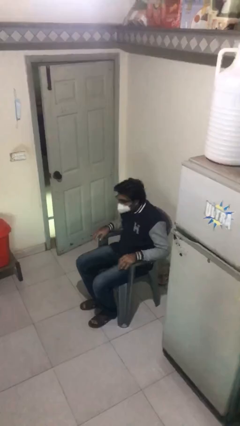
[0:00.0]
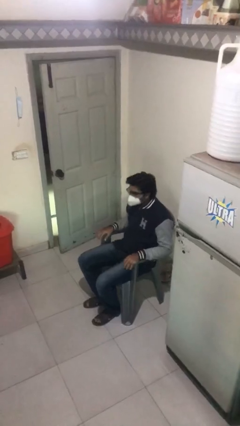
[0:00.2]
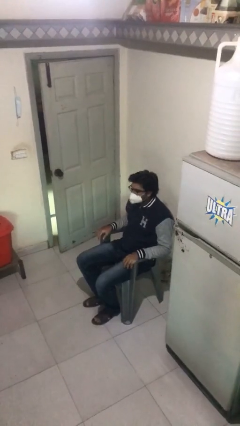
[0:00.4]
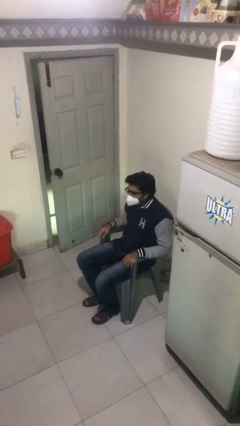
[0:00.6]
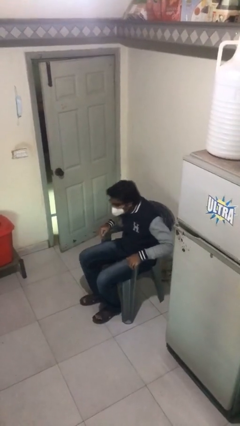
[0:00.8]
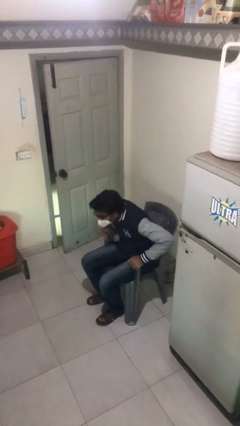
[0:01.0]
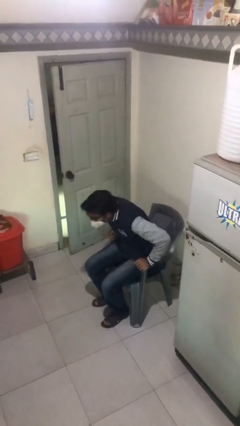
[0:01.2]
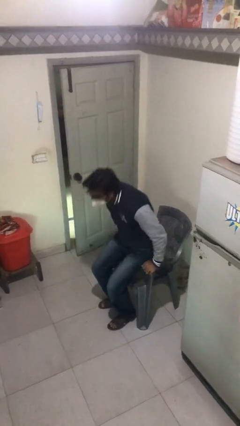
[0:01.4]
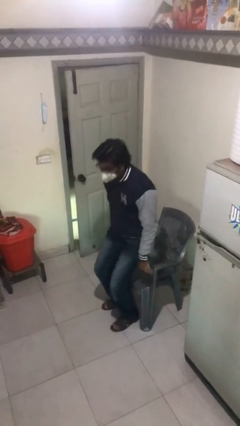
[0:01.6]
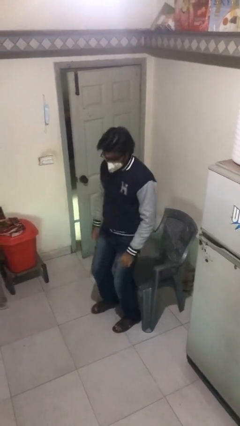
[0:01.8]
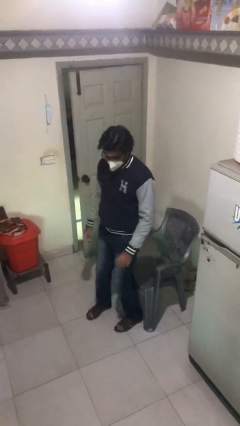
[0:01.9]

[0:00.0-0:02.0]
person stands up

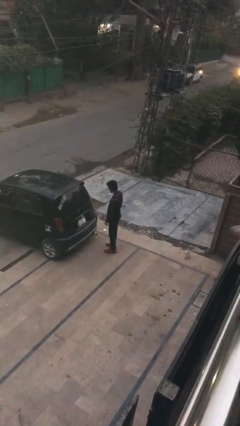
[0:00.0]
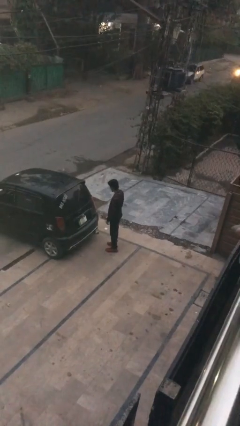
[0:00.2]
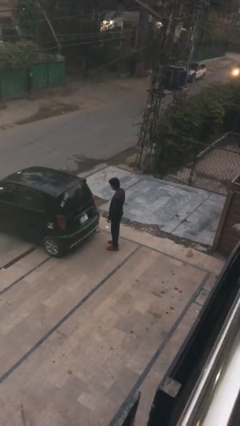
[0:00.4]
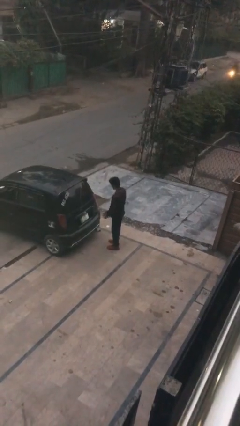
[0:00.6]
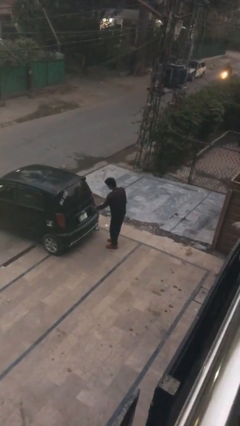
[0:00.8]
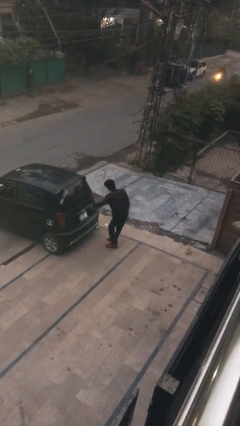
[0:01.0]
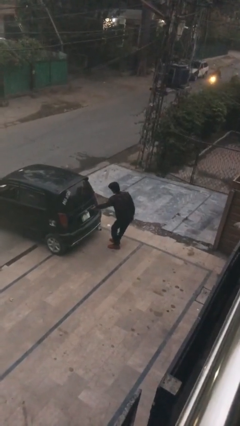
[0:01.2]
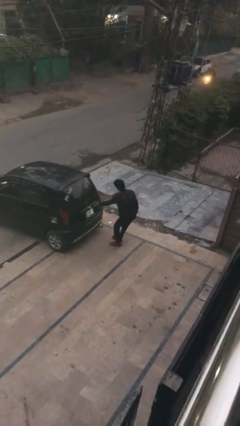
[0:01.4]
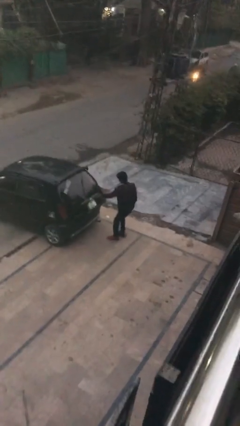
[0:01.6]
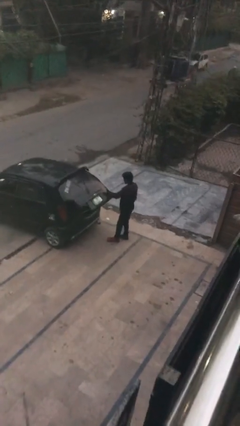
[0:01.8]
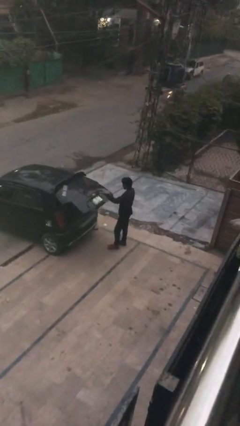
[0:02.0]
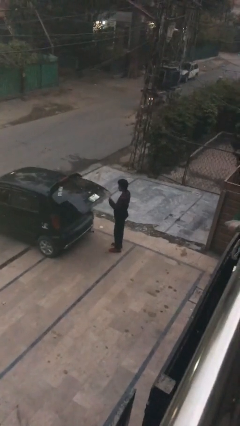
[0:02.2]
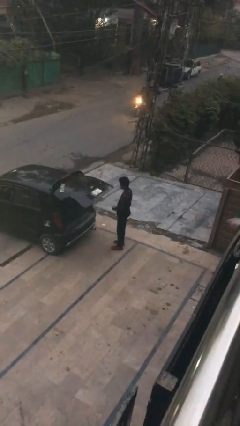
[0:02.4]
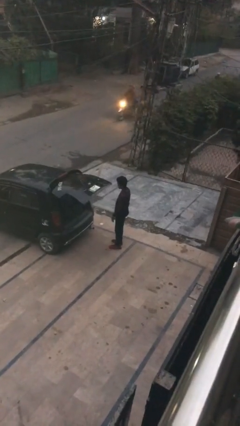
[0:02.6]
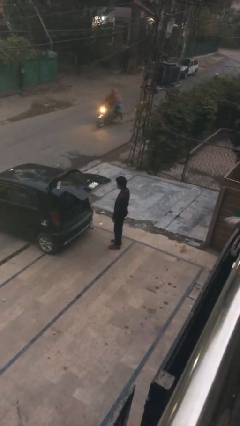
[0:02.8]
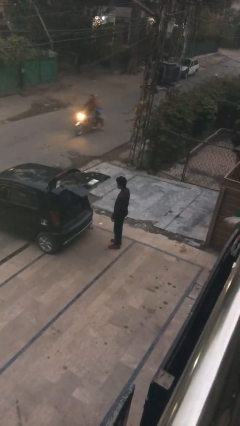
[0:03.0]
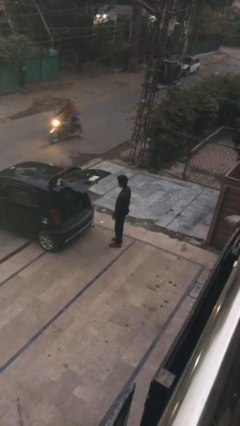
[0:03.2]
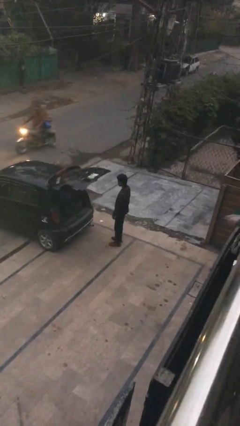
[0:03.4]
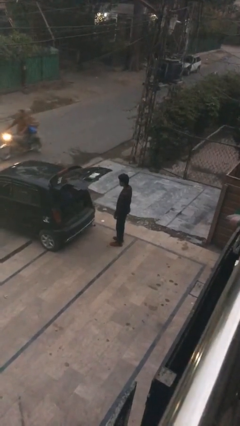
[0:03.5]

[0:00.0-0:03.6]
person opens car trunk

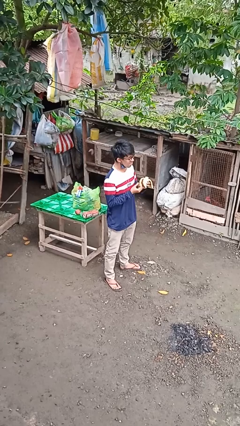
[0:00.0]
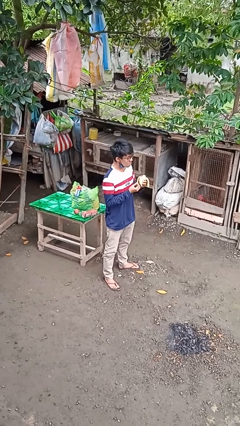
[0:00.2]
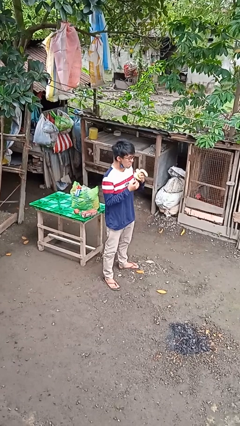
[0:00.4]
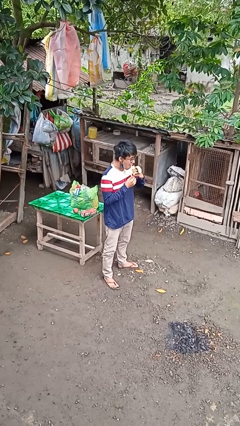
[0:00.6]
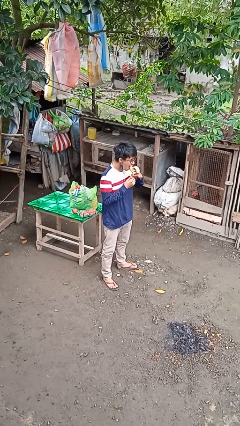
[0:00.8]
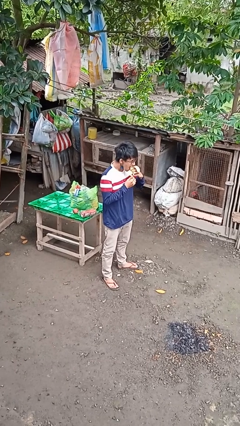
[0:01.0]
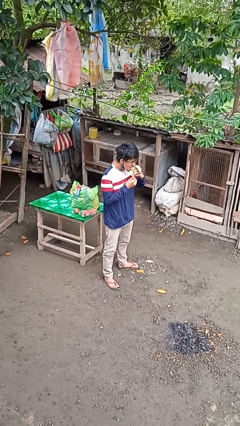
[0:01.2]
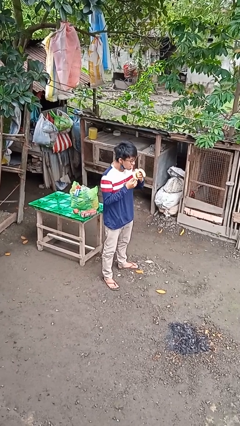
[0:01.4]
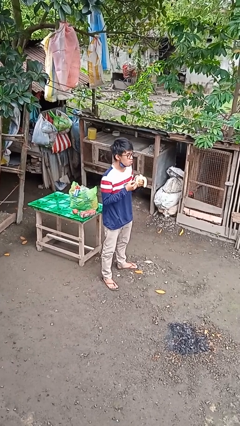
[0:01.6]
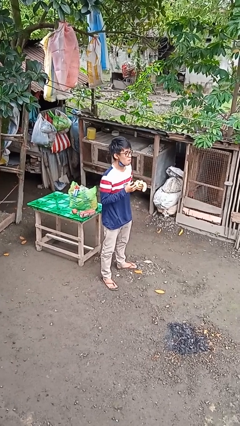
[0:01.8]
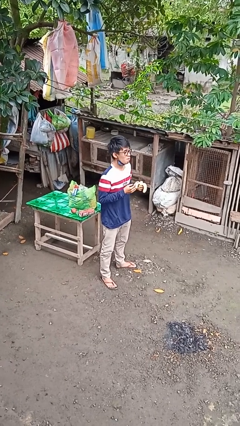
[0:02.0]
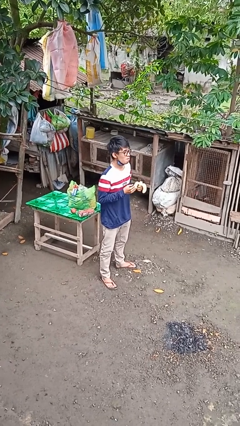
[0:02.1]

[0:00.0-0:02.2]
person eats banana

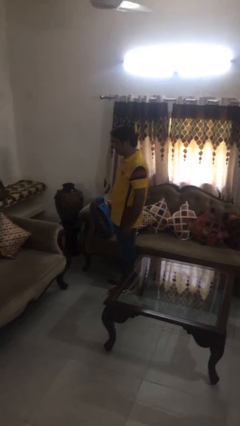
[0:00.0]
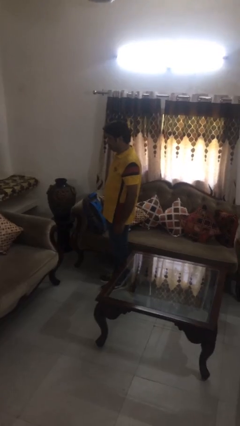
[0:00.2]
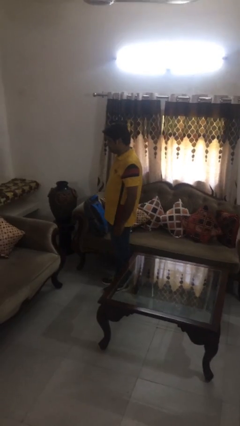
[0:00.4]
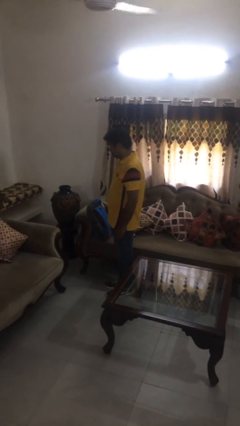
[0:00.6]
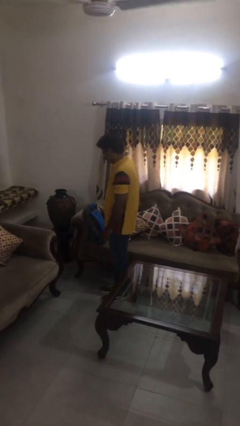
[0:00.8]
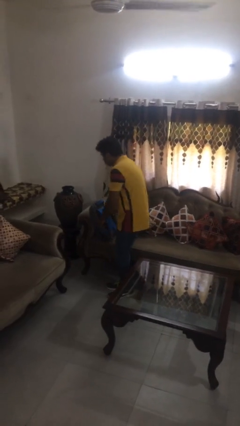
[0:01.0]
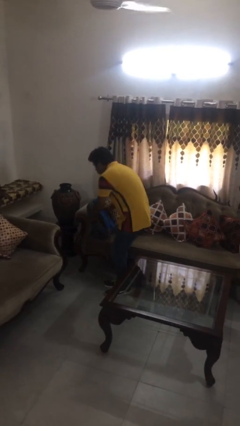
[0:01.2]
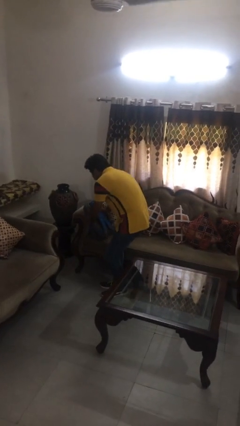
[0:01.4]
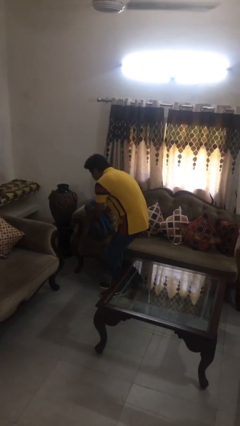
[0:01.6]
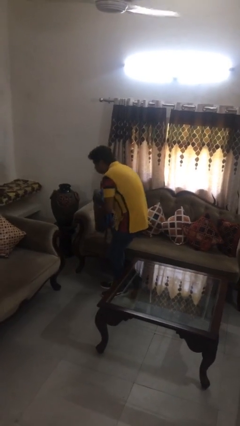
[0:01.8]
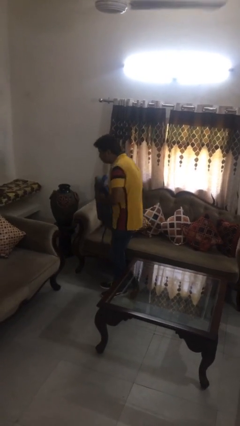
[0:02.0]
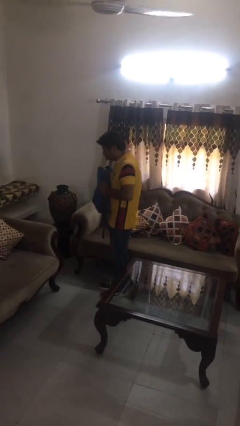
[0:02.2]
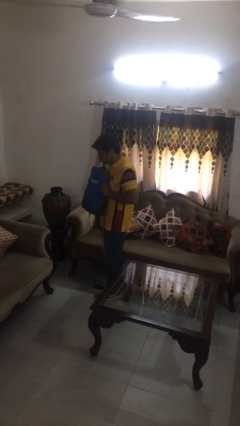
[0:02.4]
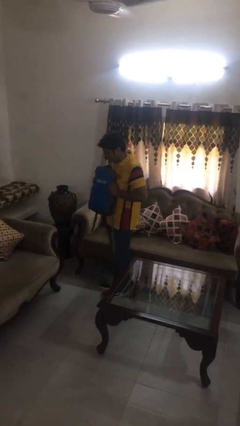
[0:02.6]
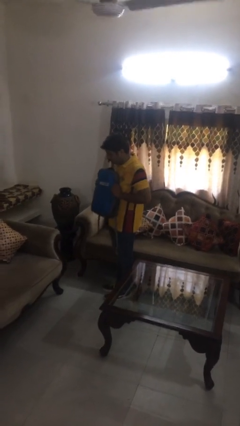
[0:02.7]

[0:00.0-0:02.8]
person picks up object from couch

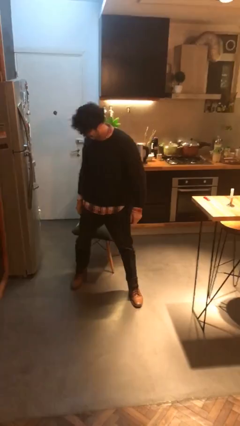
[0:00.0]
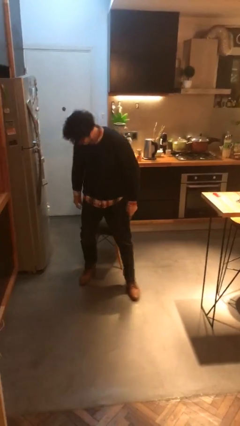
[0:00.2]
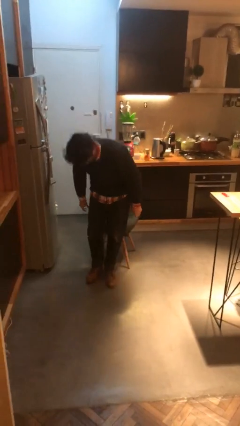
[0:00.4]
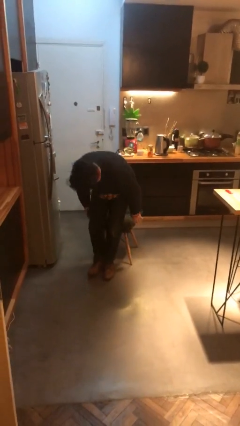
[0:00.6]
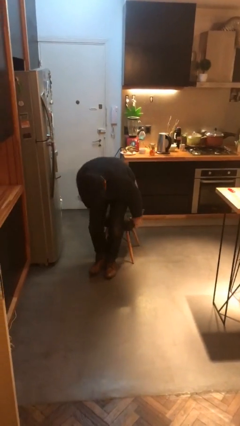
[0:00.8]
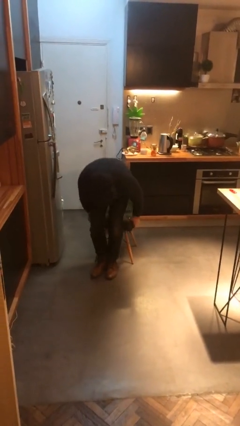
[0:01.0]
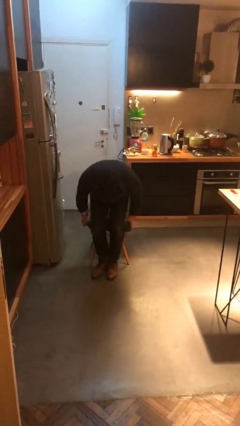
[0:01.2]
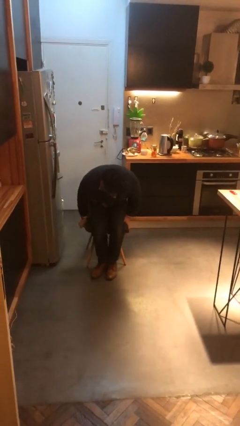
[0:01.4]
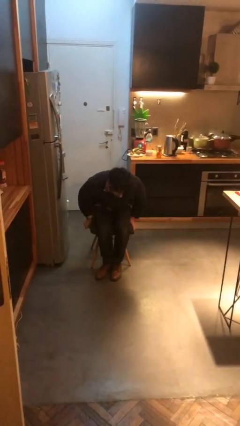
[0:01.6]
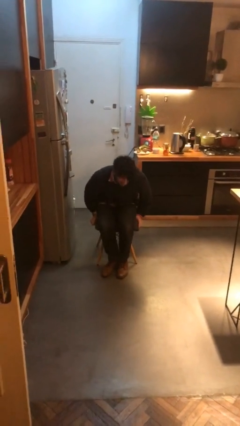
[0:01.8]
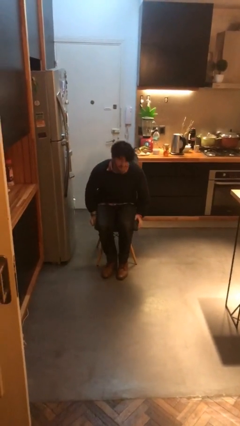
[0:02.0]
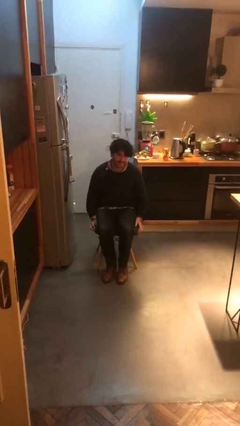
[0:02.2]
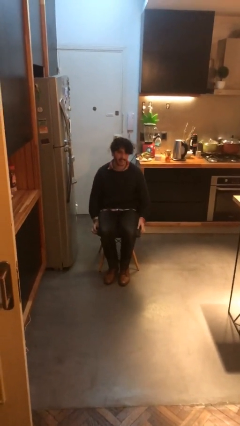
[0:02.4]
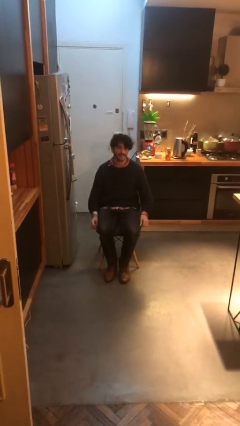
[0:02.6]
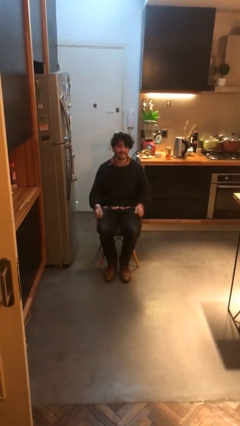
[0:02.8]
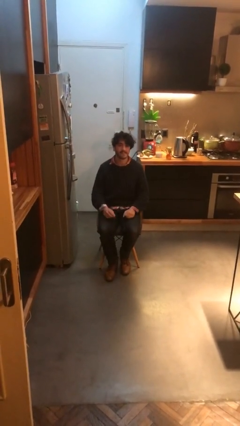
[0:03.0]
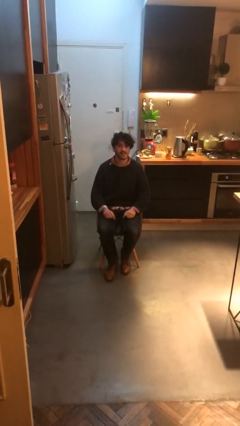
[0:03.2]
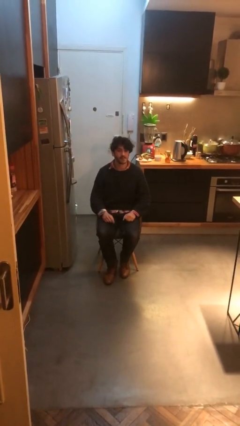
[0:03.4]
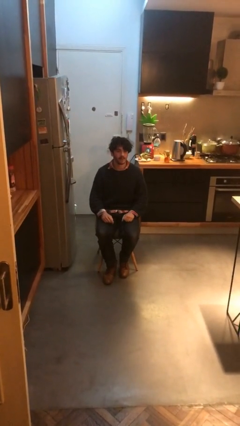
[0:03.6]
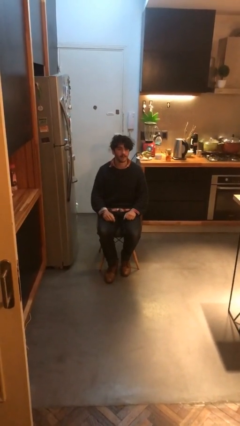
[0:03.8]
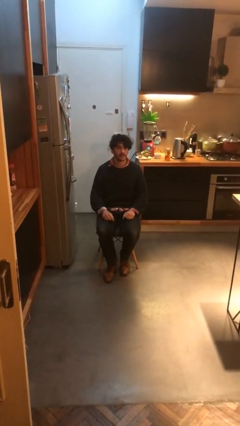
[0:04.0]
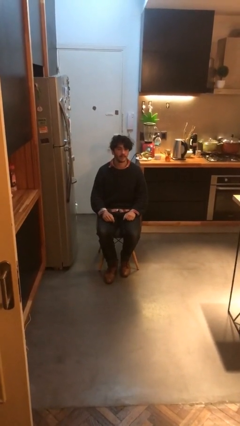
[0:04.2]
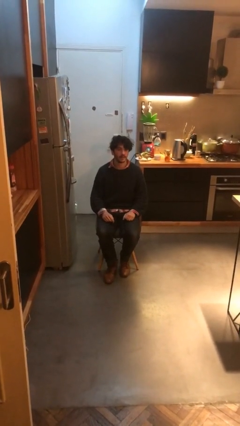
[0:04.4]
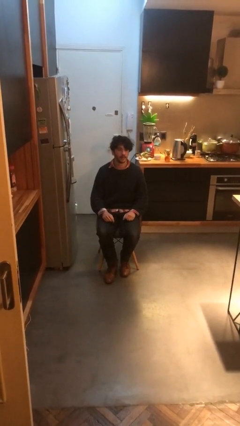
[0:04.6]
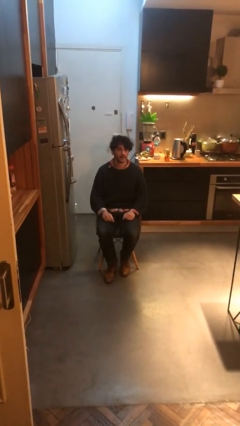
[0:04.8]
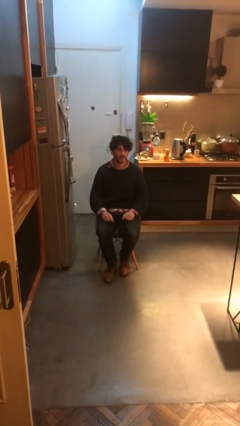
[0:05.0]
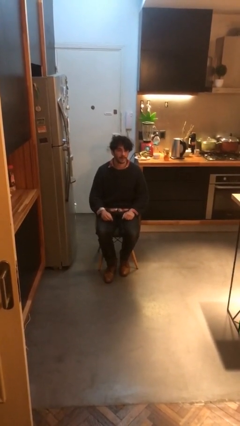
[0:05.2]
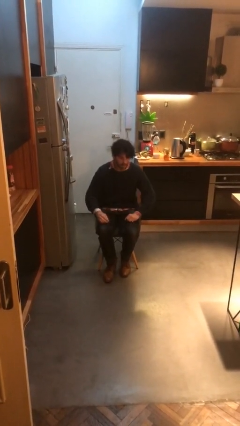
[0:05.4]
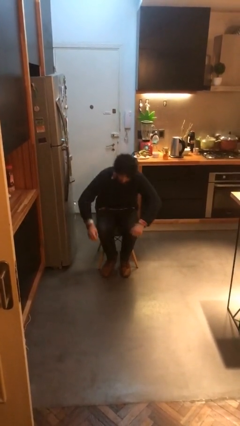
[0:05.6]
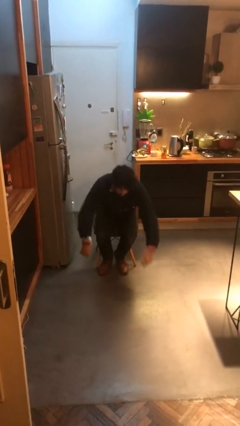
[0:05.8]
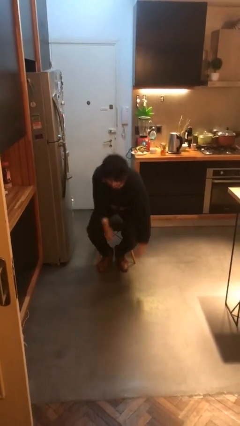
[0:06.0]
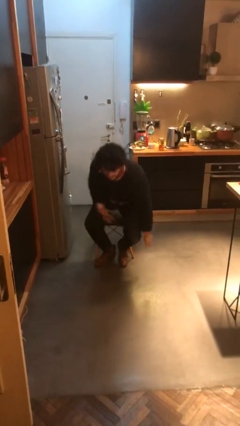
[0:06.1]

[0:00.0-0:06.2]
person sits down

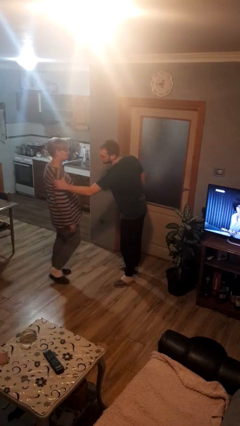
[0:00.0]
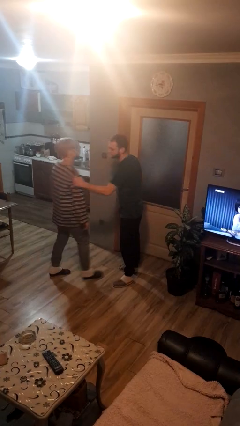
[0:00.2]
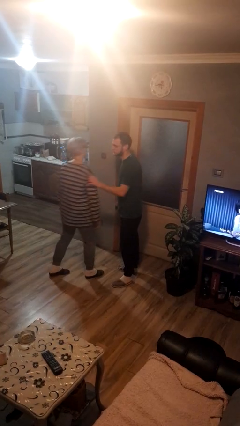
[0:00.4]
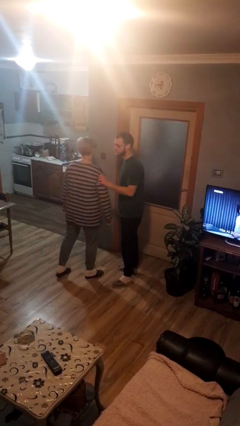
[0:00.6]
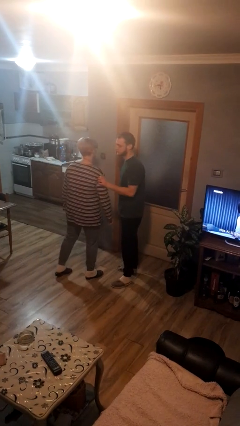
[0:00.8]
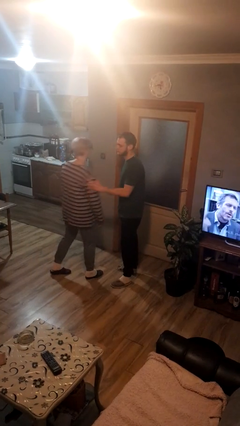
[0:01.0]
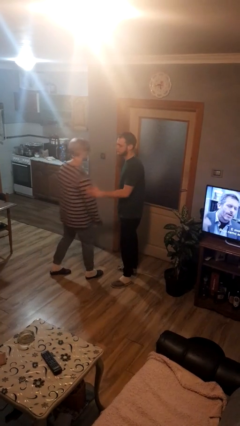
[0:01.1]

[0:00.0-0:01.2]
person grabs person by bicep
